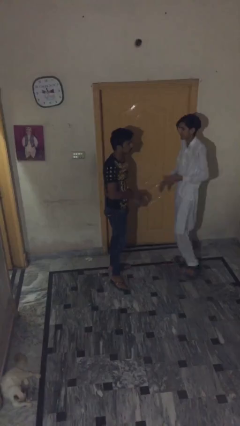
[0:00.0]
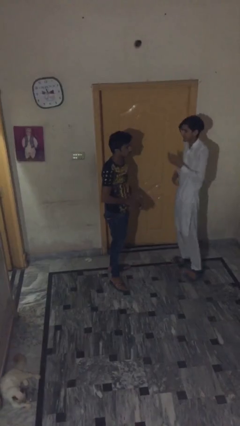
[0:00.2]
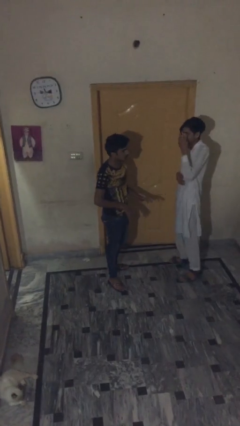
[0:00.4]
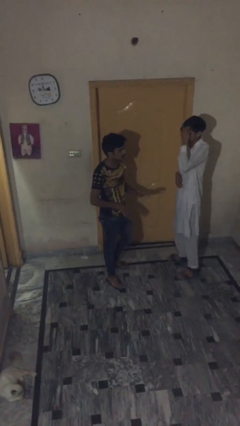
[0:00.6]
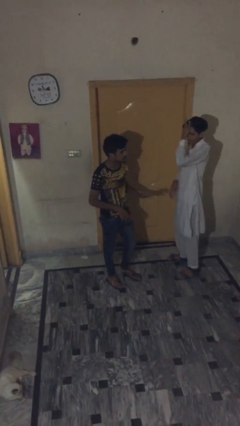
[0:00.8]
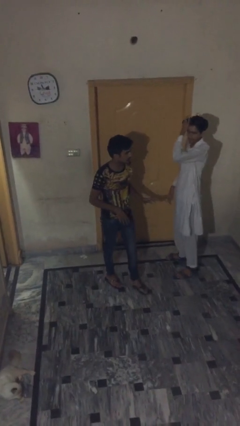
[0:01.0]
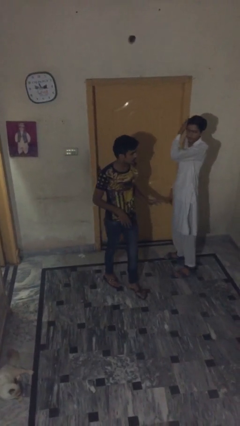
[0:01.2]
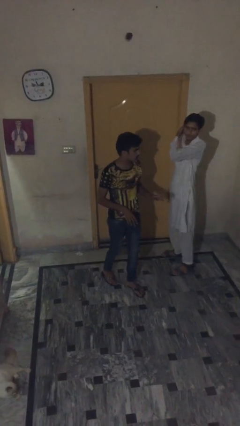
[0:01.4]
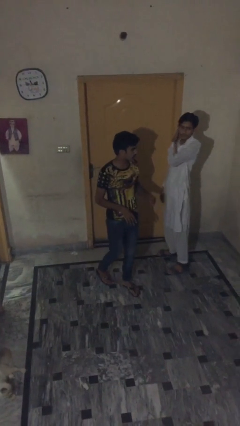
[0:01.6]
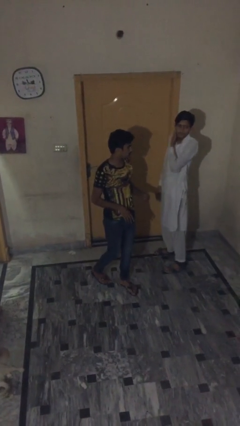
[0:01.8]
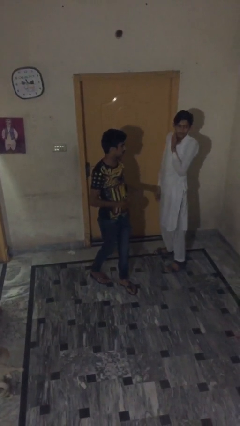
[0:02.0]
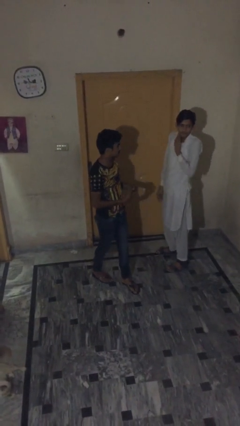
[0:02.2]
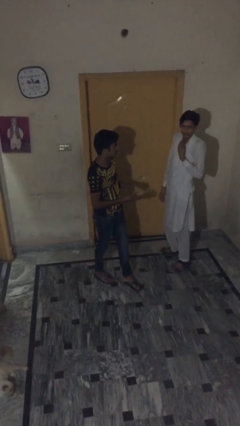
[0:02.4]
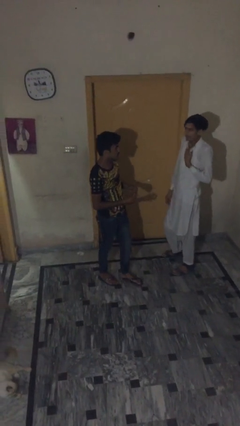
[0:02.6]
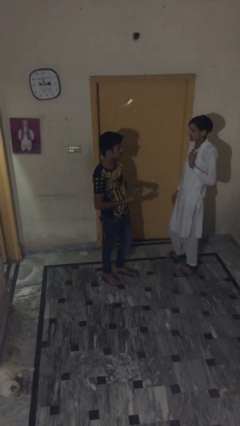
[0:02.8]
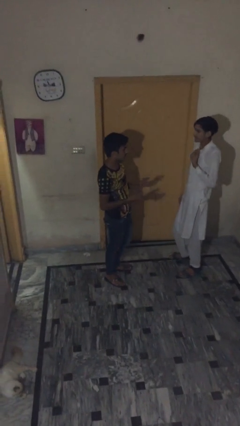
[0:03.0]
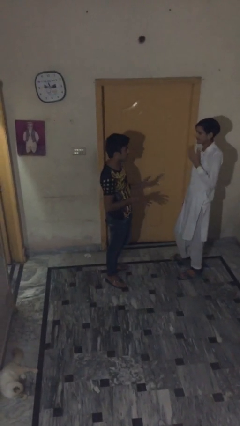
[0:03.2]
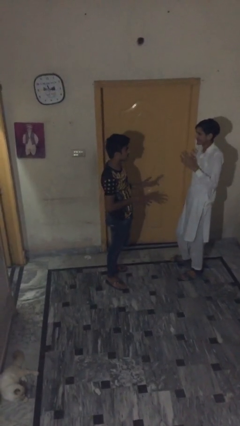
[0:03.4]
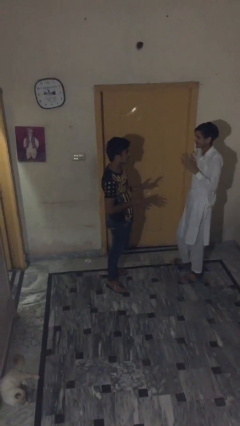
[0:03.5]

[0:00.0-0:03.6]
person talks to person

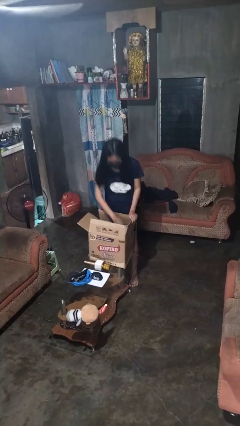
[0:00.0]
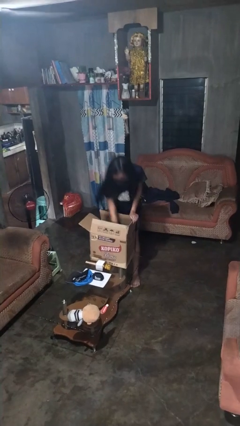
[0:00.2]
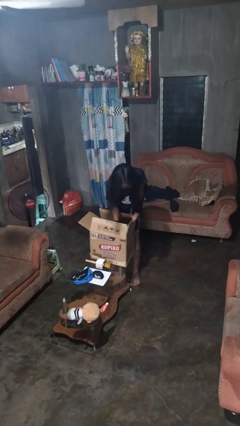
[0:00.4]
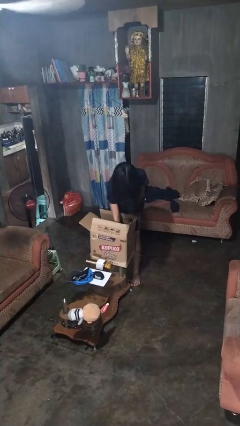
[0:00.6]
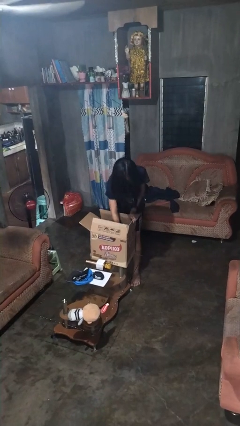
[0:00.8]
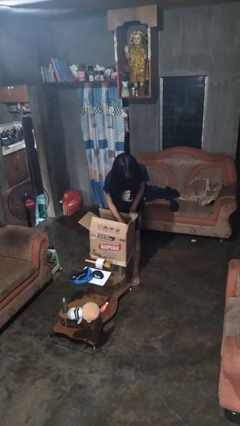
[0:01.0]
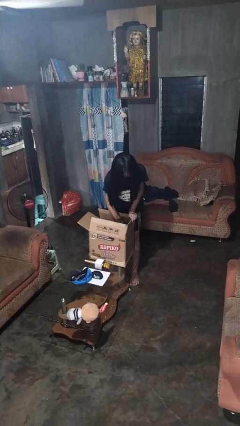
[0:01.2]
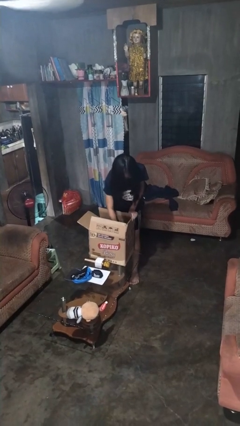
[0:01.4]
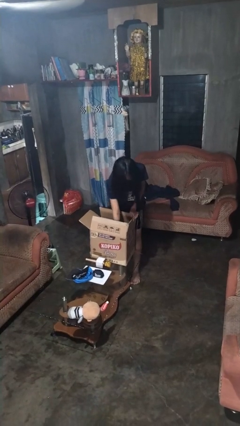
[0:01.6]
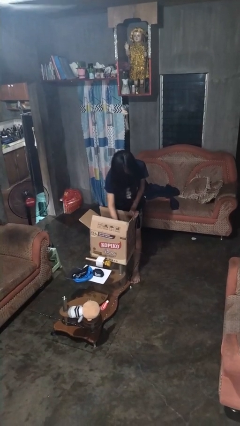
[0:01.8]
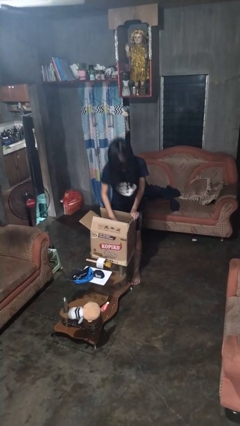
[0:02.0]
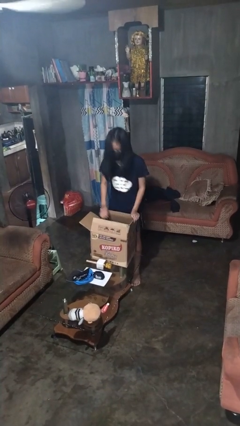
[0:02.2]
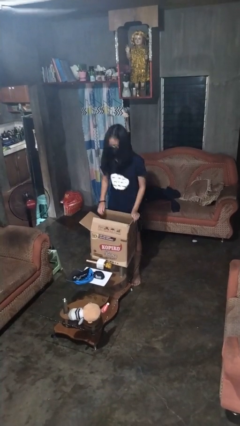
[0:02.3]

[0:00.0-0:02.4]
person searches in box

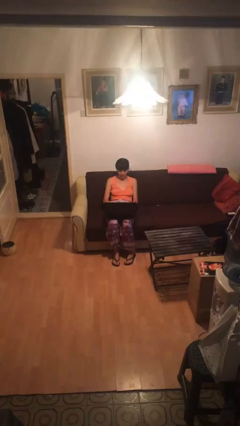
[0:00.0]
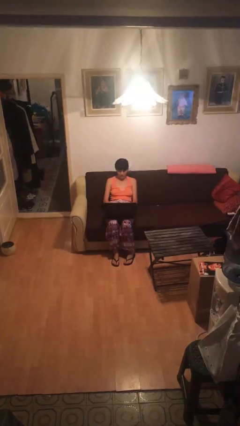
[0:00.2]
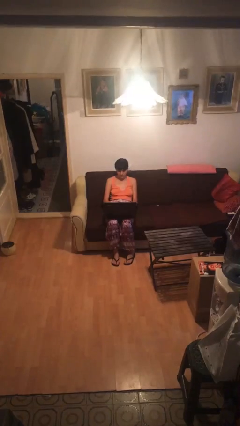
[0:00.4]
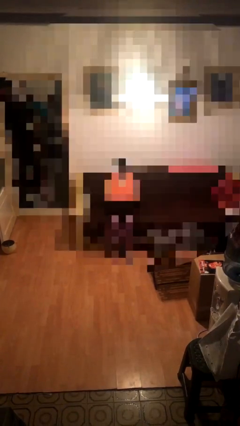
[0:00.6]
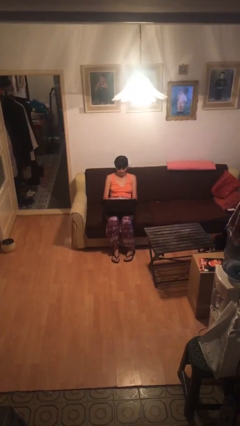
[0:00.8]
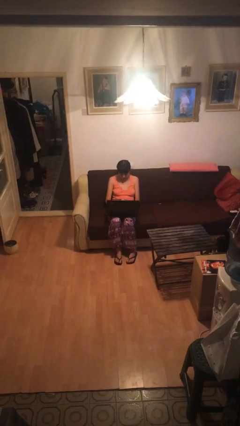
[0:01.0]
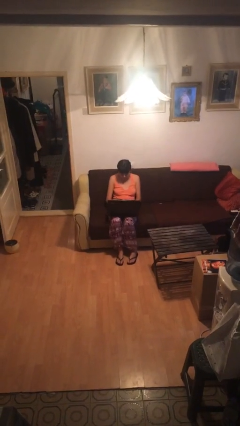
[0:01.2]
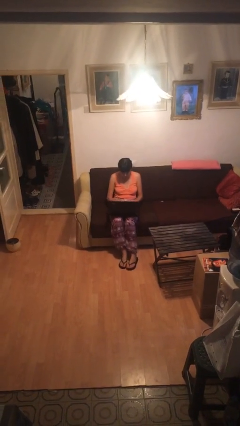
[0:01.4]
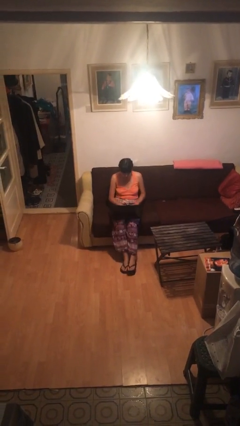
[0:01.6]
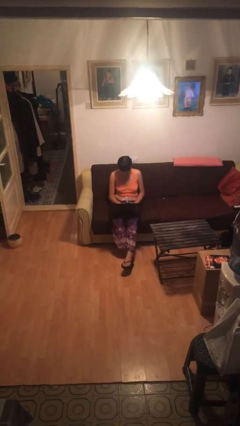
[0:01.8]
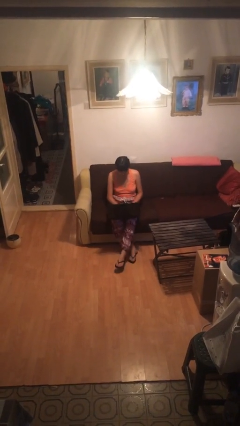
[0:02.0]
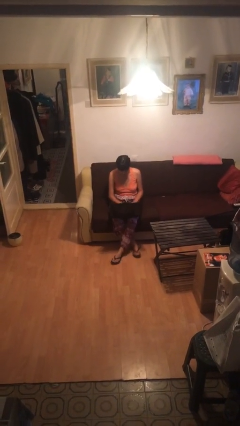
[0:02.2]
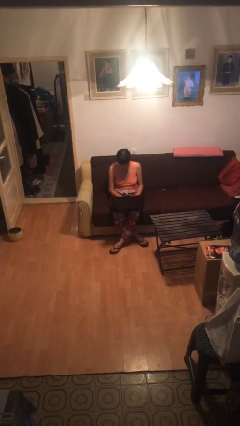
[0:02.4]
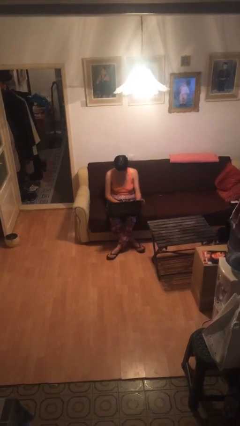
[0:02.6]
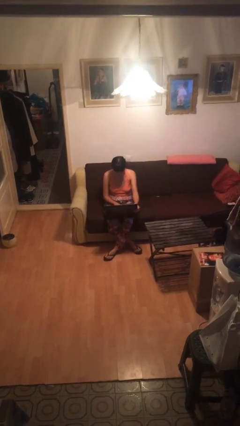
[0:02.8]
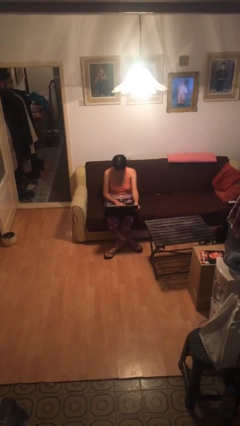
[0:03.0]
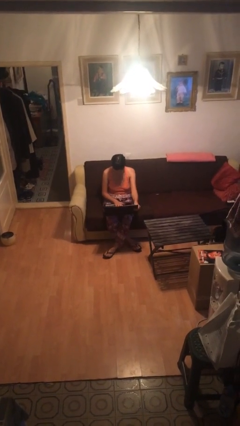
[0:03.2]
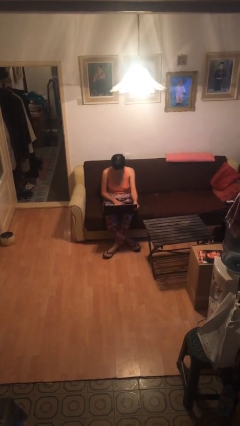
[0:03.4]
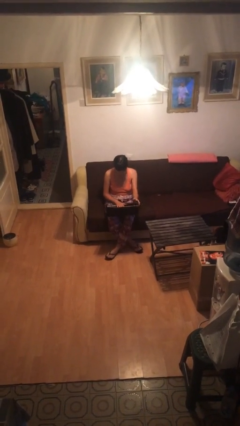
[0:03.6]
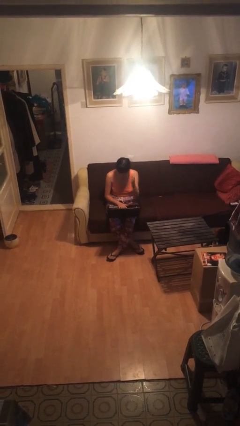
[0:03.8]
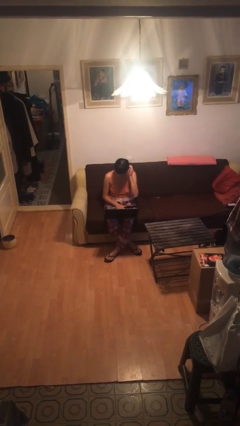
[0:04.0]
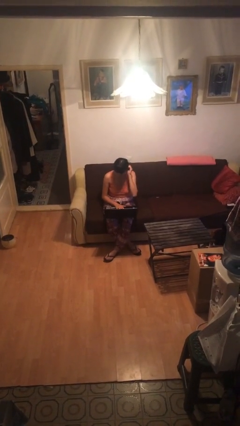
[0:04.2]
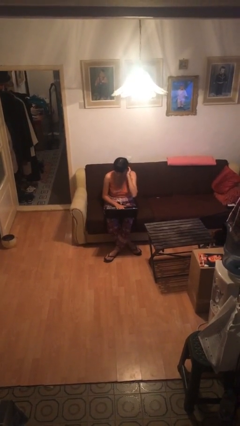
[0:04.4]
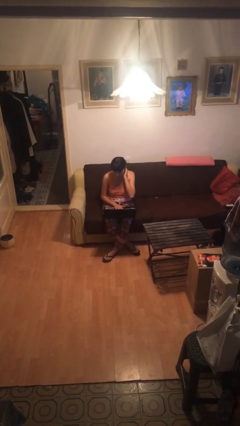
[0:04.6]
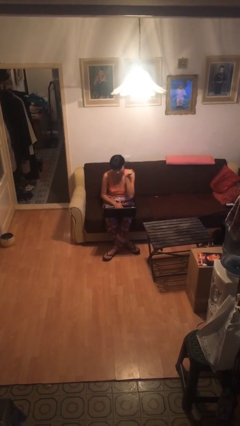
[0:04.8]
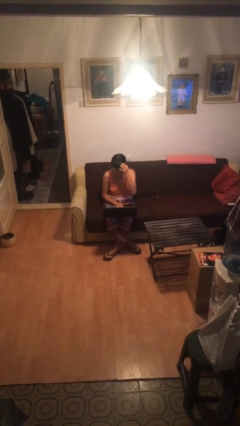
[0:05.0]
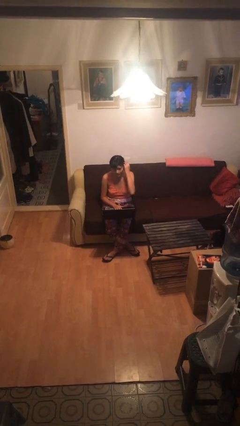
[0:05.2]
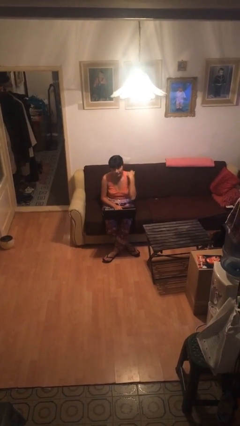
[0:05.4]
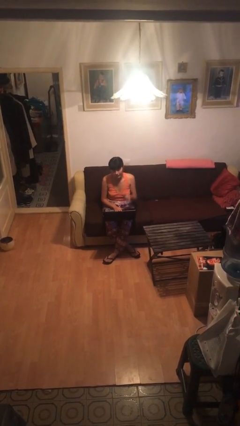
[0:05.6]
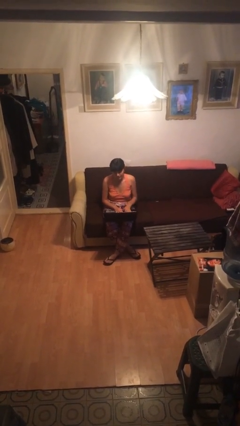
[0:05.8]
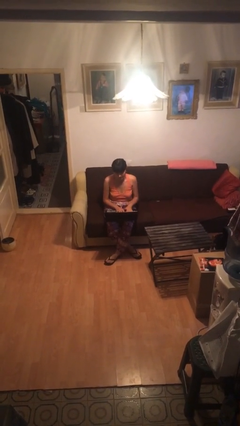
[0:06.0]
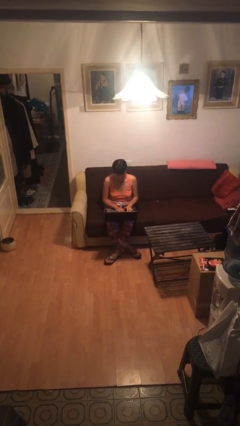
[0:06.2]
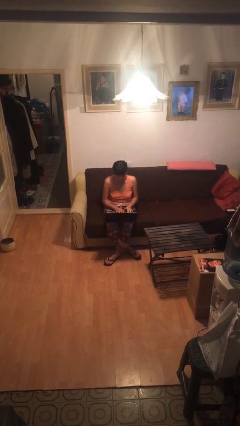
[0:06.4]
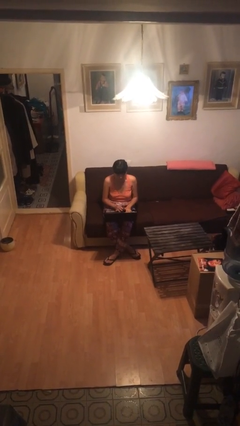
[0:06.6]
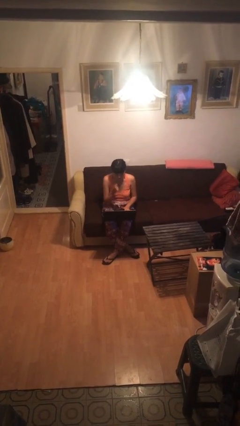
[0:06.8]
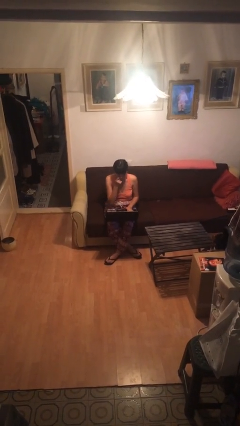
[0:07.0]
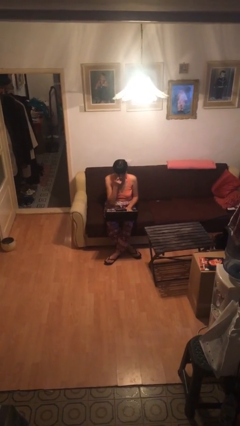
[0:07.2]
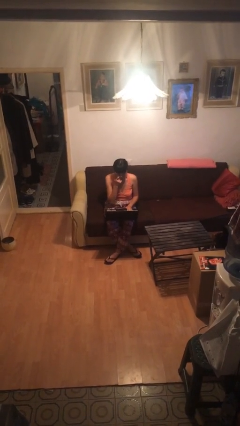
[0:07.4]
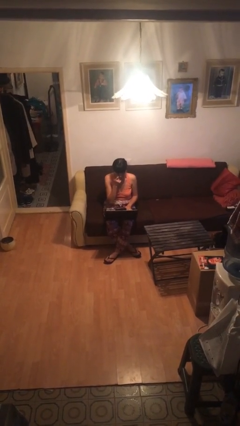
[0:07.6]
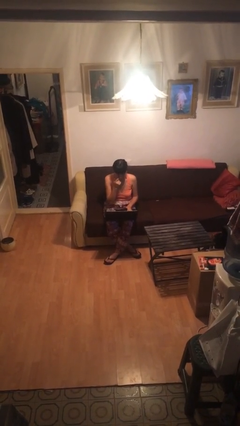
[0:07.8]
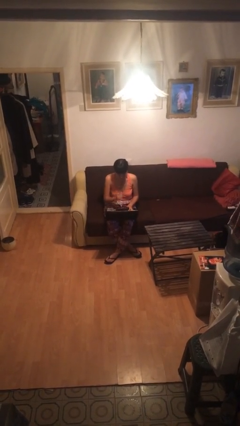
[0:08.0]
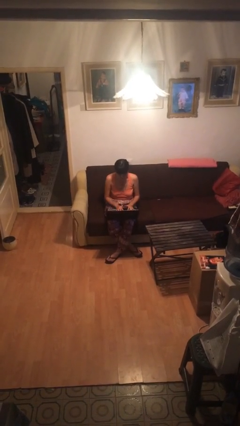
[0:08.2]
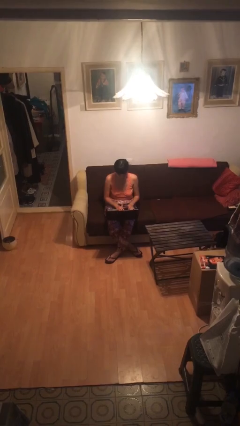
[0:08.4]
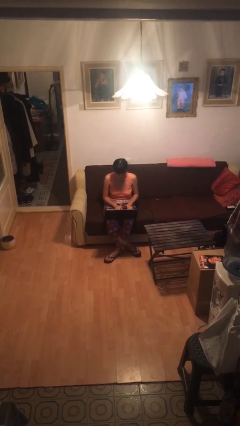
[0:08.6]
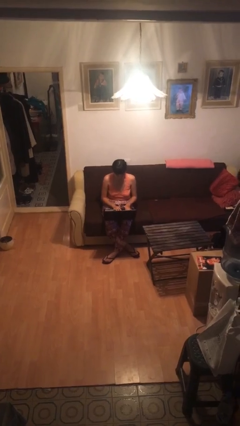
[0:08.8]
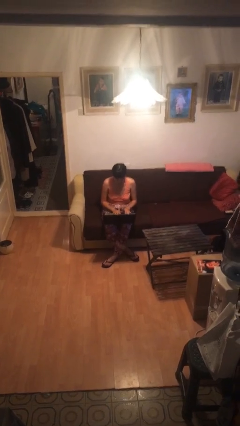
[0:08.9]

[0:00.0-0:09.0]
person interacts with laptop

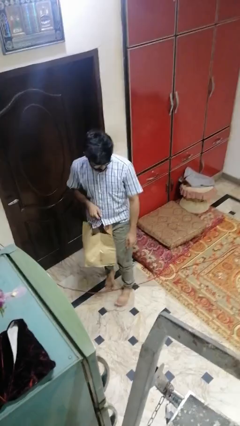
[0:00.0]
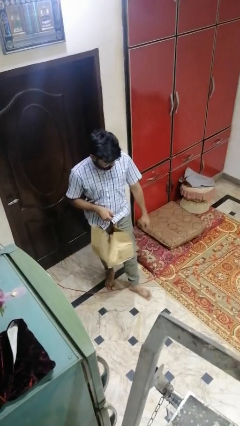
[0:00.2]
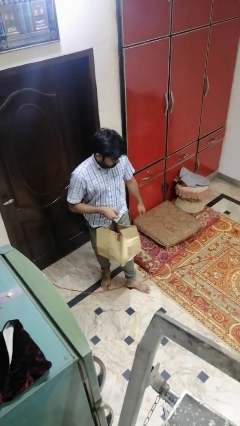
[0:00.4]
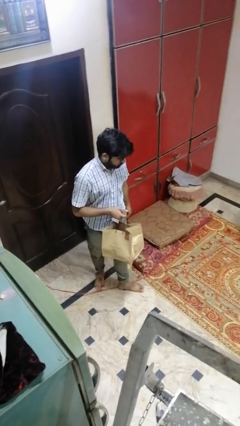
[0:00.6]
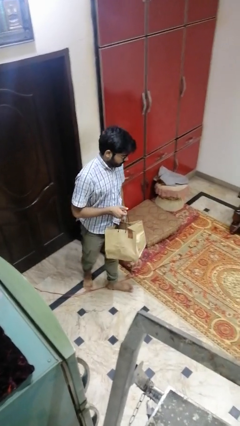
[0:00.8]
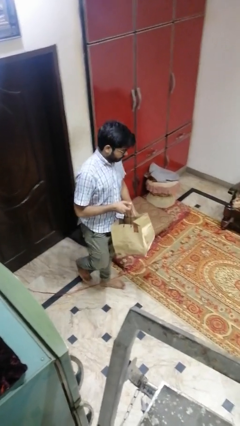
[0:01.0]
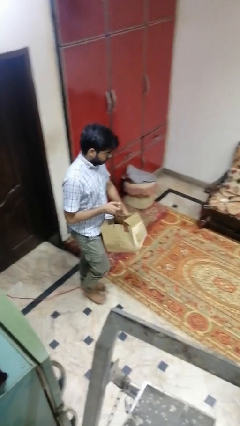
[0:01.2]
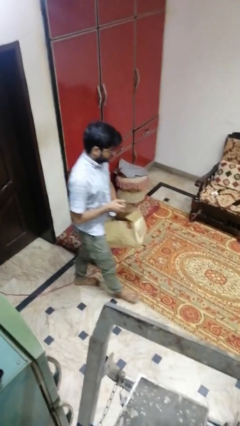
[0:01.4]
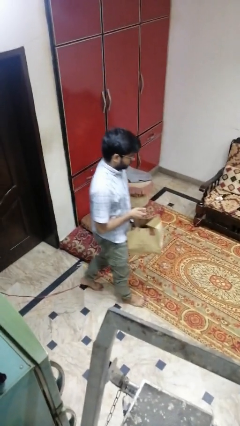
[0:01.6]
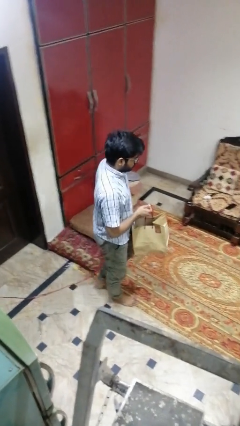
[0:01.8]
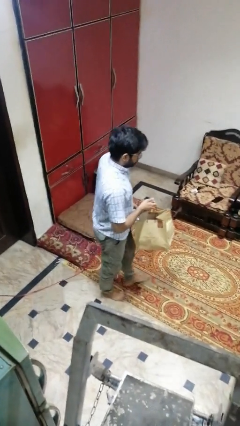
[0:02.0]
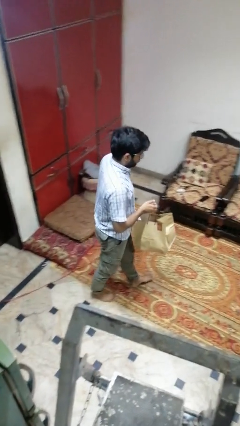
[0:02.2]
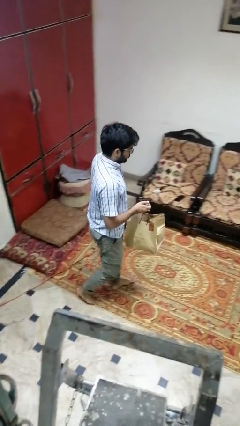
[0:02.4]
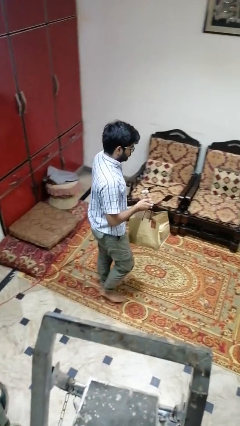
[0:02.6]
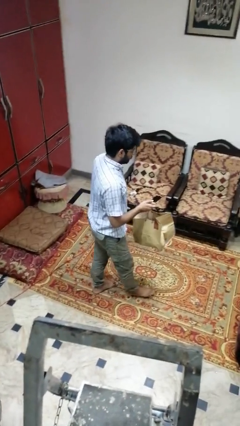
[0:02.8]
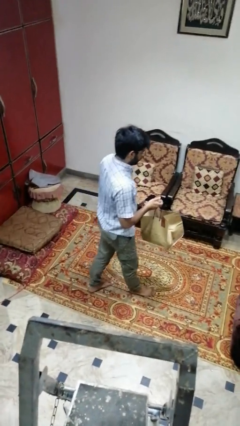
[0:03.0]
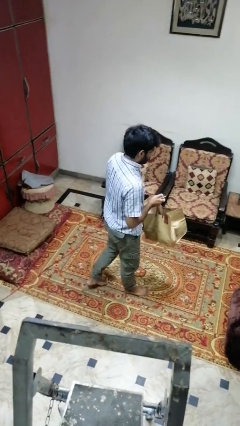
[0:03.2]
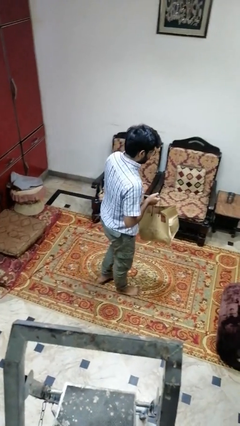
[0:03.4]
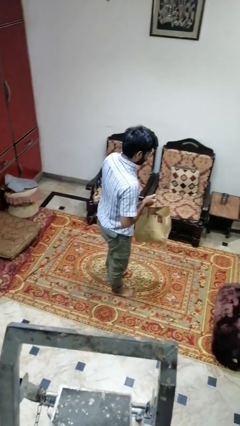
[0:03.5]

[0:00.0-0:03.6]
person carries groceries
